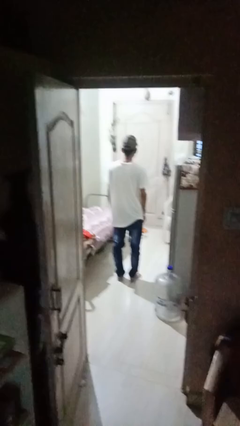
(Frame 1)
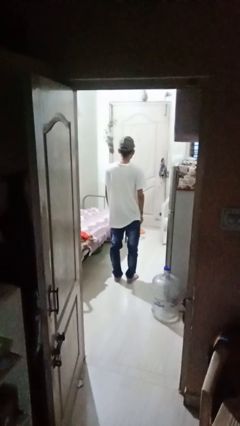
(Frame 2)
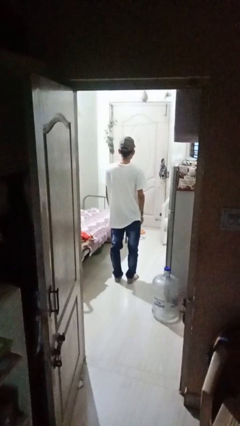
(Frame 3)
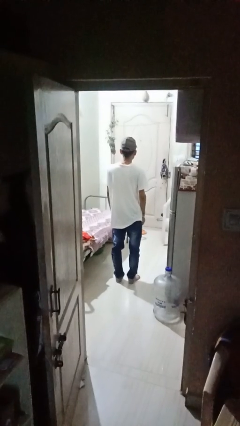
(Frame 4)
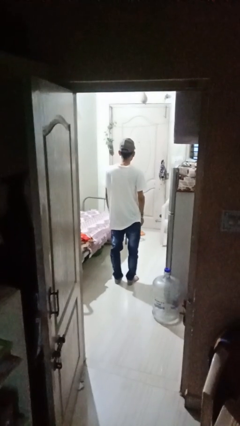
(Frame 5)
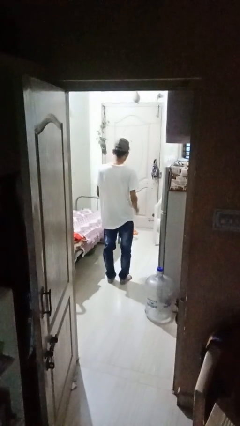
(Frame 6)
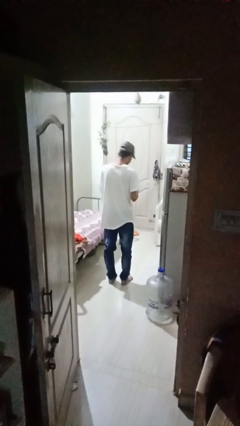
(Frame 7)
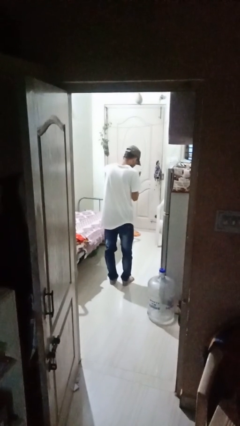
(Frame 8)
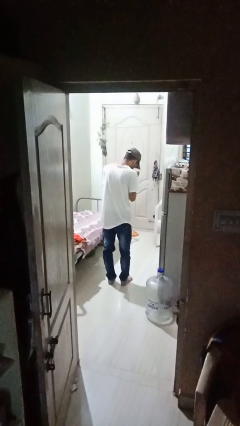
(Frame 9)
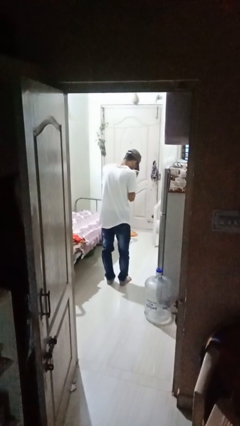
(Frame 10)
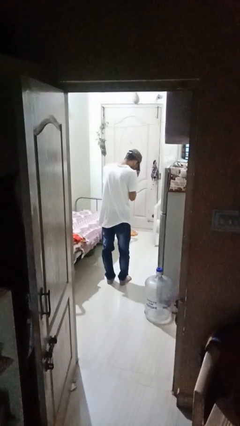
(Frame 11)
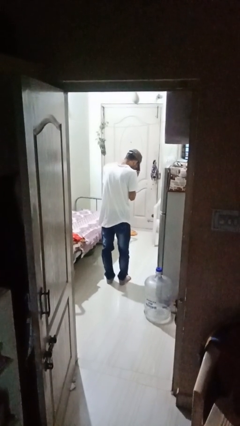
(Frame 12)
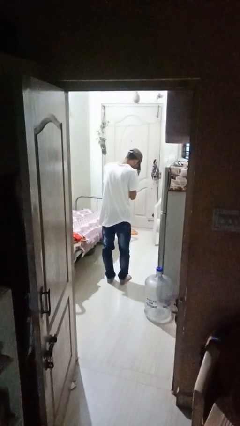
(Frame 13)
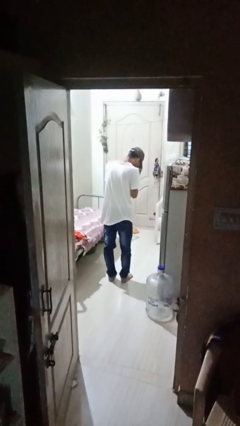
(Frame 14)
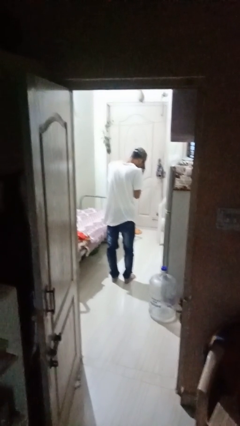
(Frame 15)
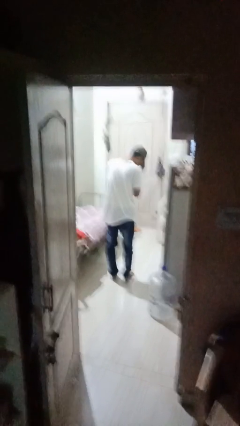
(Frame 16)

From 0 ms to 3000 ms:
person prays

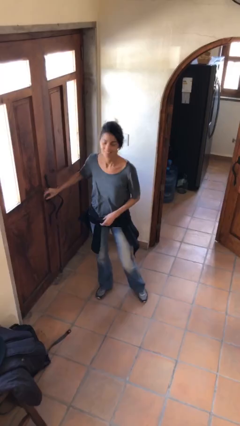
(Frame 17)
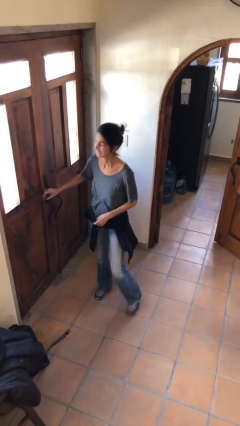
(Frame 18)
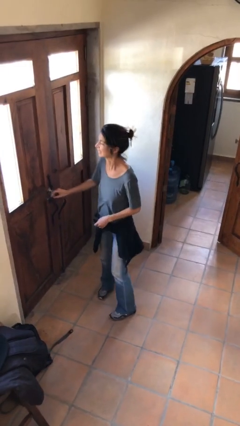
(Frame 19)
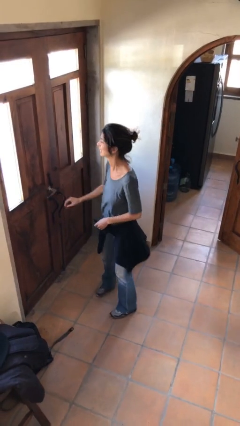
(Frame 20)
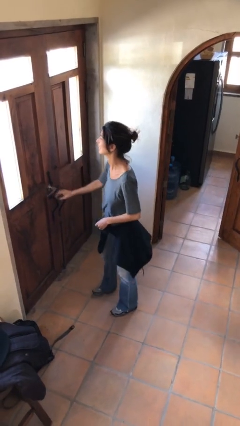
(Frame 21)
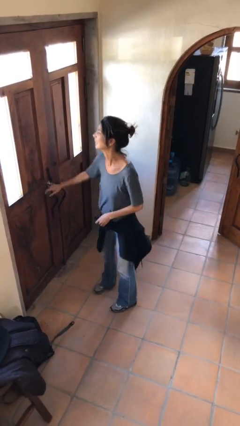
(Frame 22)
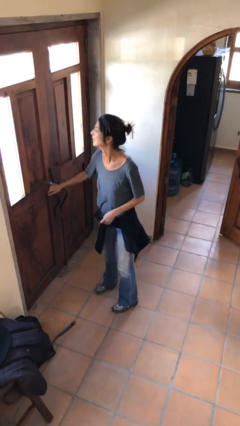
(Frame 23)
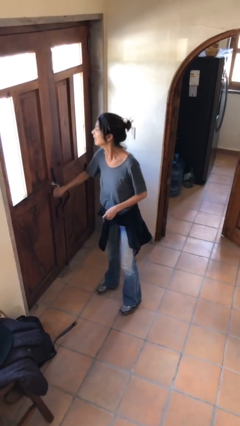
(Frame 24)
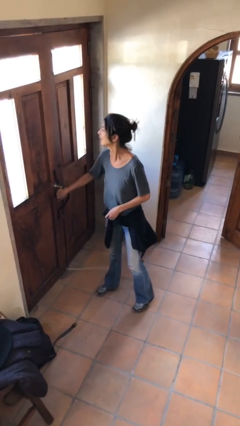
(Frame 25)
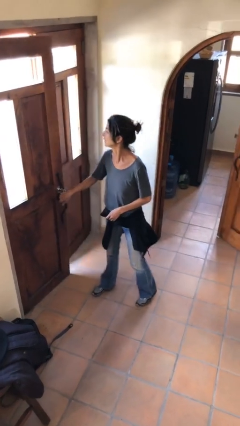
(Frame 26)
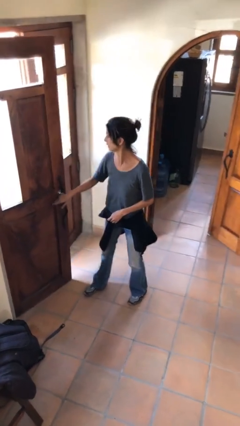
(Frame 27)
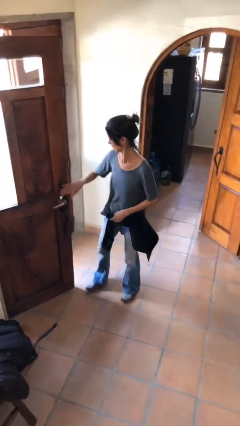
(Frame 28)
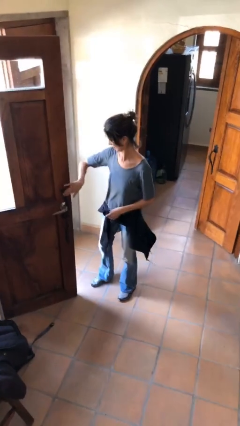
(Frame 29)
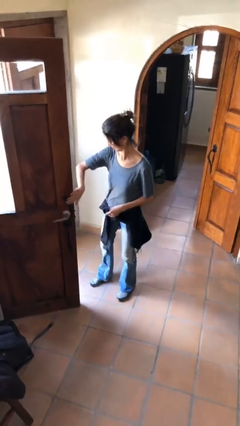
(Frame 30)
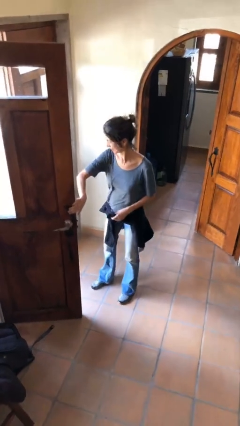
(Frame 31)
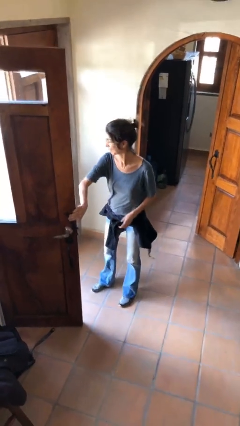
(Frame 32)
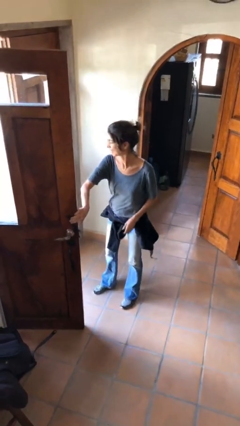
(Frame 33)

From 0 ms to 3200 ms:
person opens facility door

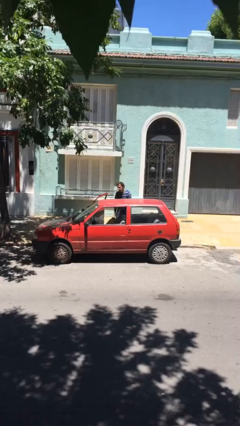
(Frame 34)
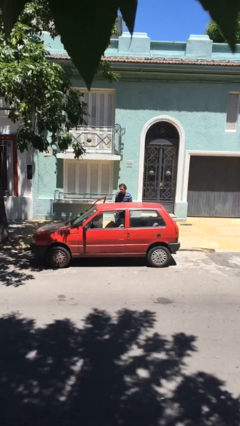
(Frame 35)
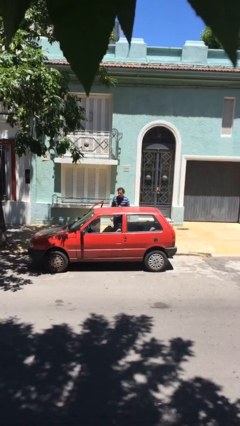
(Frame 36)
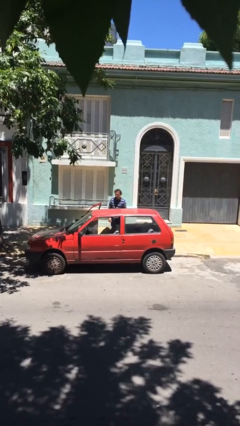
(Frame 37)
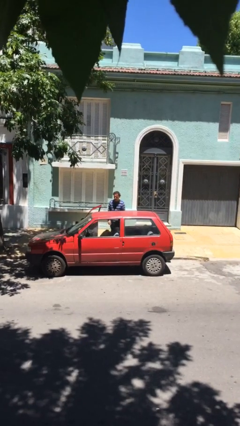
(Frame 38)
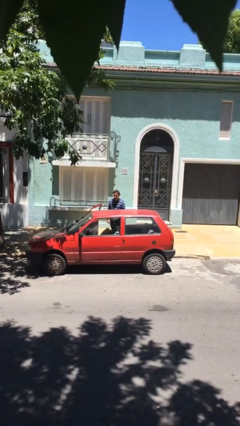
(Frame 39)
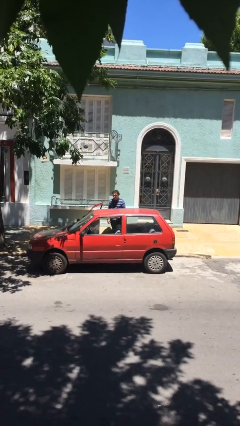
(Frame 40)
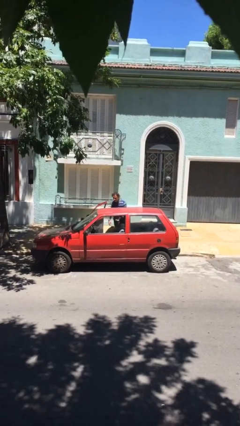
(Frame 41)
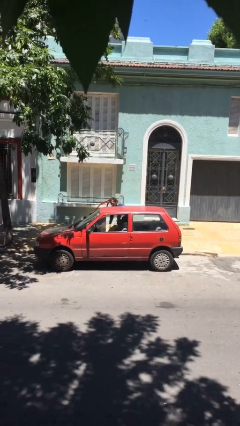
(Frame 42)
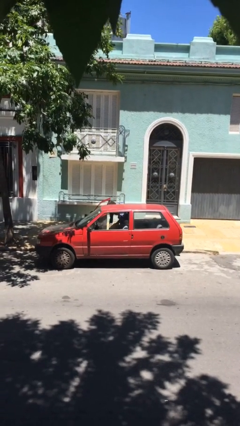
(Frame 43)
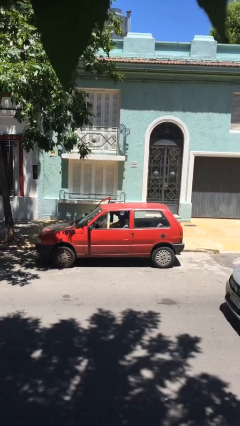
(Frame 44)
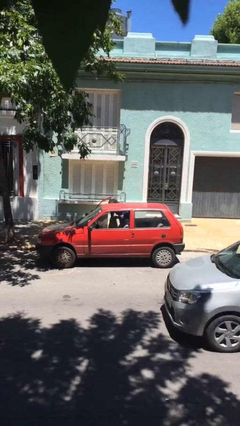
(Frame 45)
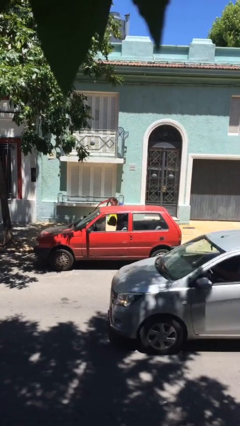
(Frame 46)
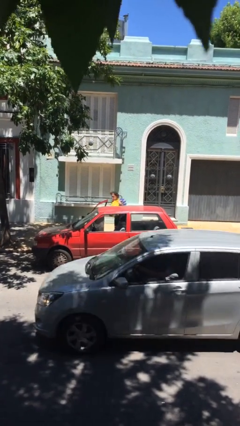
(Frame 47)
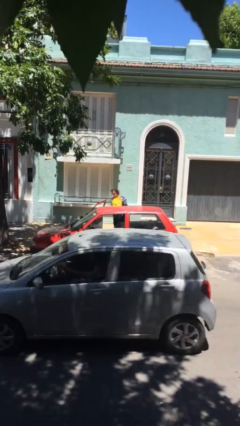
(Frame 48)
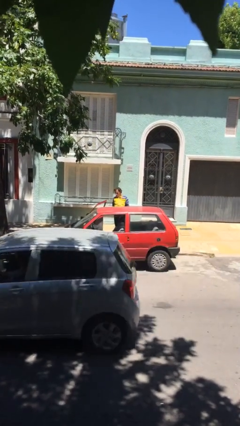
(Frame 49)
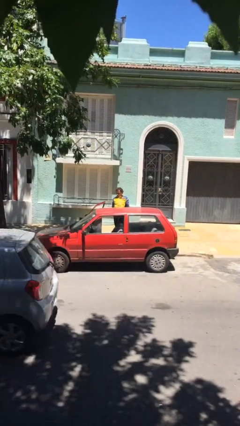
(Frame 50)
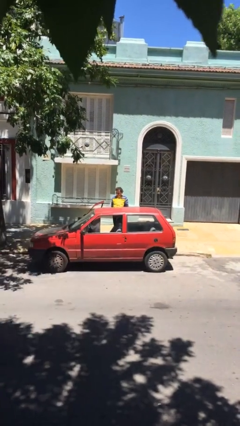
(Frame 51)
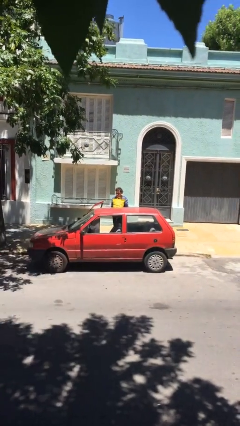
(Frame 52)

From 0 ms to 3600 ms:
person unloads car

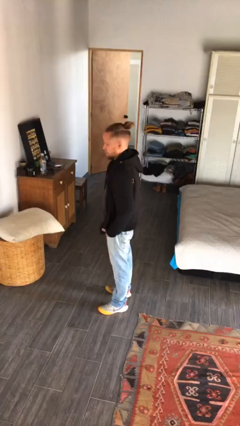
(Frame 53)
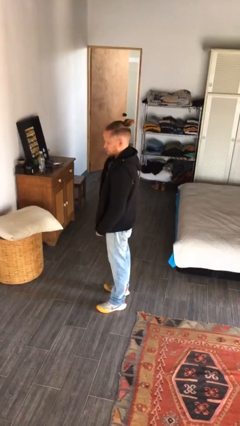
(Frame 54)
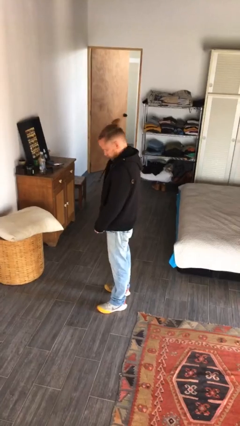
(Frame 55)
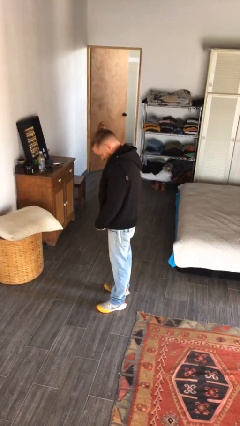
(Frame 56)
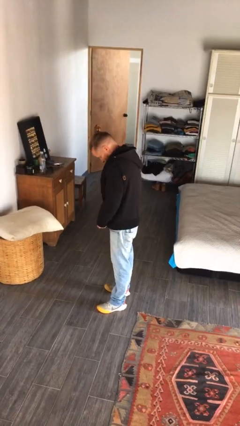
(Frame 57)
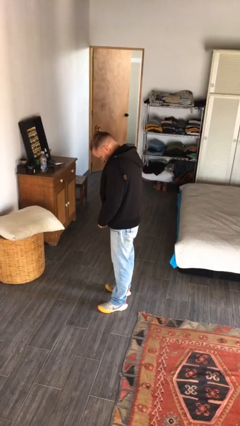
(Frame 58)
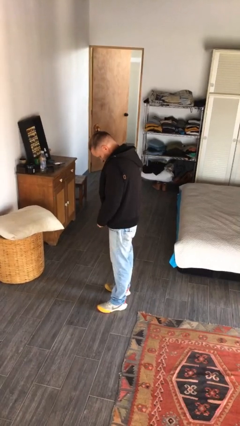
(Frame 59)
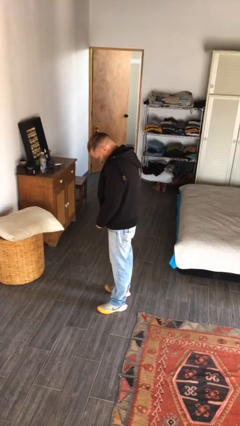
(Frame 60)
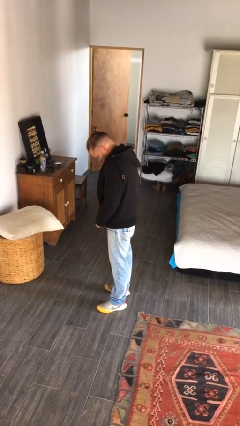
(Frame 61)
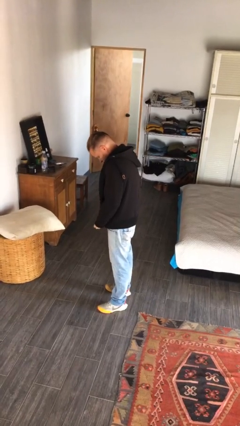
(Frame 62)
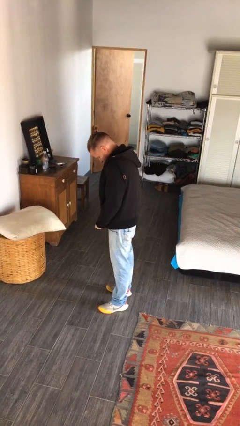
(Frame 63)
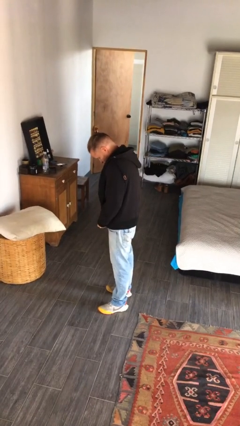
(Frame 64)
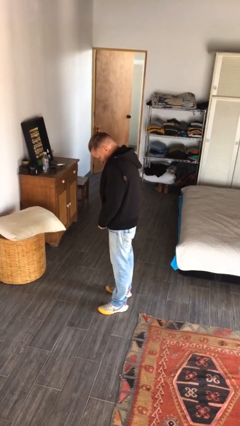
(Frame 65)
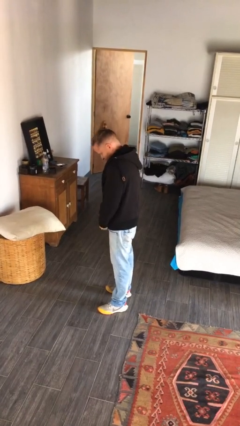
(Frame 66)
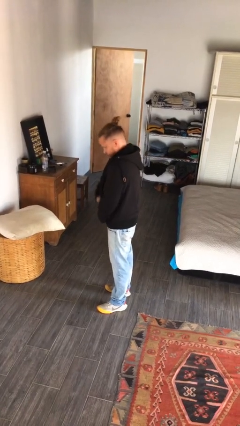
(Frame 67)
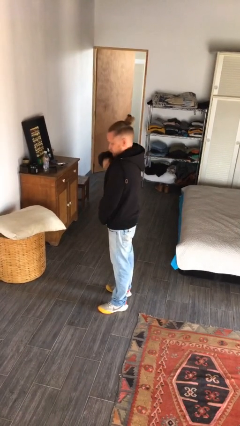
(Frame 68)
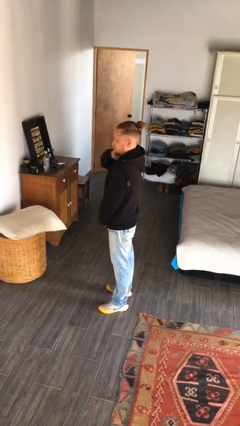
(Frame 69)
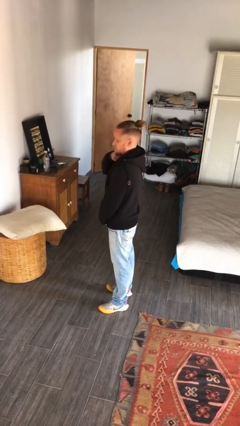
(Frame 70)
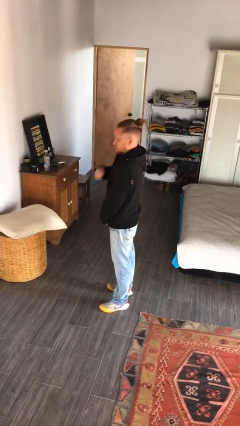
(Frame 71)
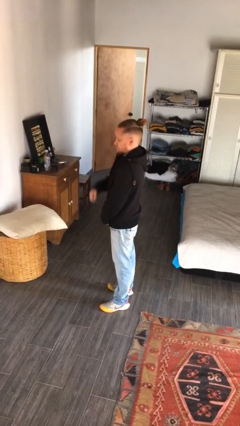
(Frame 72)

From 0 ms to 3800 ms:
person zips up jacket

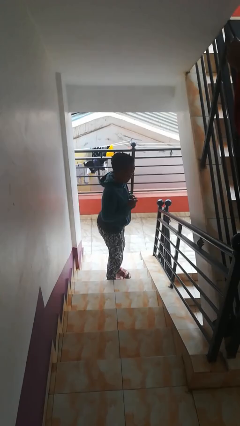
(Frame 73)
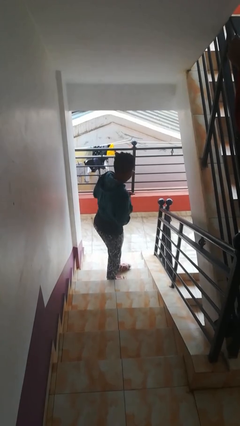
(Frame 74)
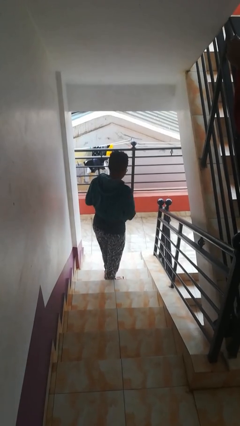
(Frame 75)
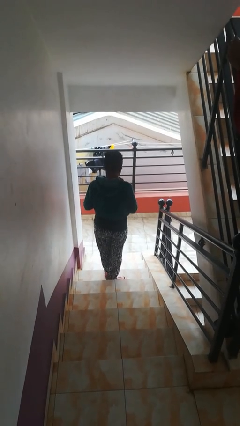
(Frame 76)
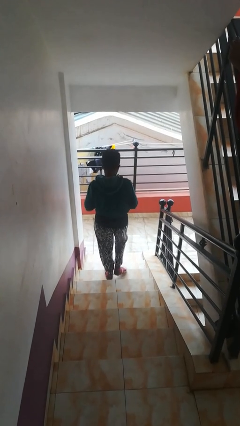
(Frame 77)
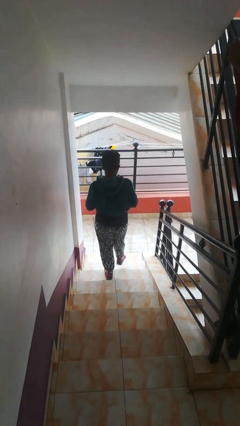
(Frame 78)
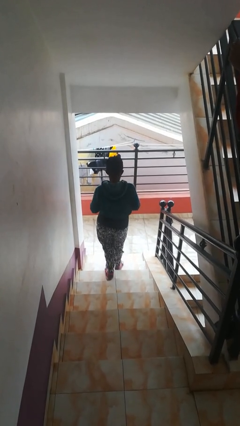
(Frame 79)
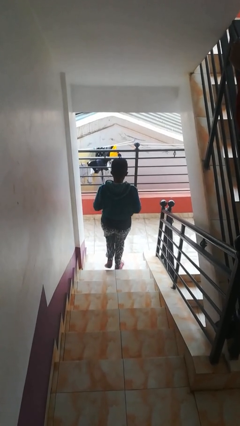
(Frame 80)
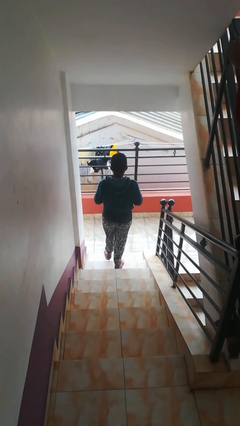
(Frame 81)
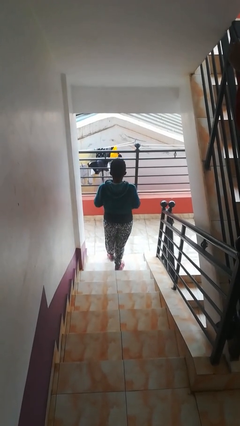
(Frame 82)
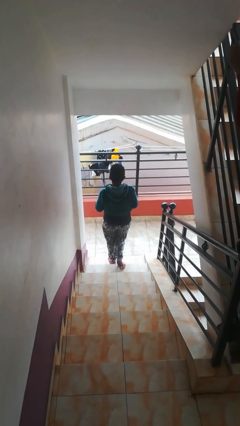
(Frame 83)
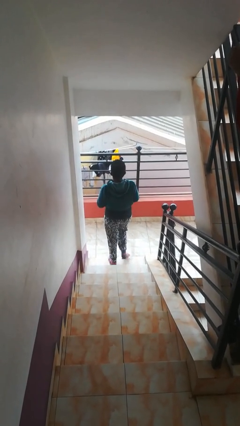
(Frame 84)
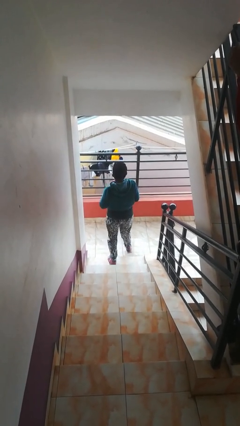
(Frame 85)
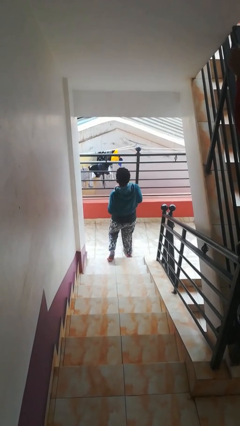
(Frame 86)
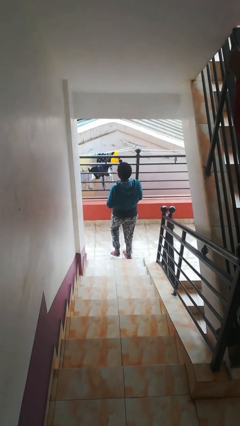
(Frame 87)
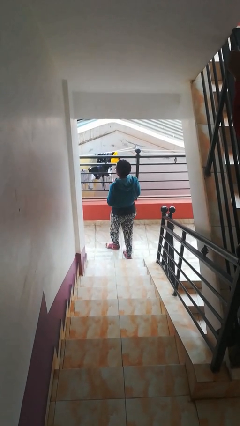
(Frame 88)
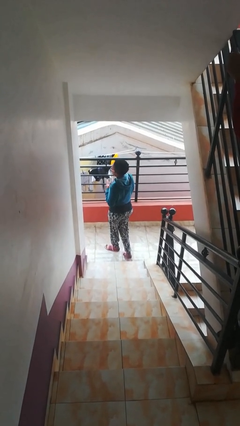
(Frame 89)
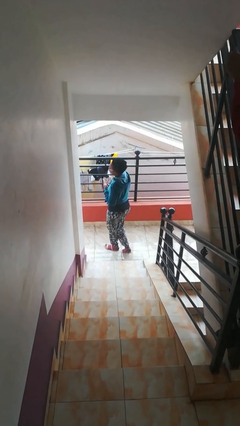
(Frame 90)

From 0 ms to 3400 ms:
person climbs down stairs

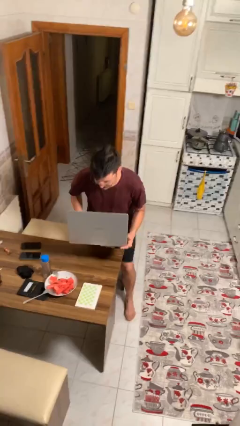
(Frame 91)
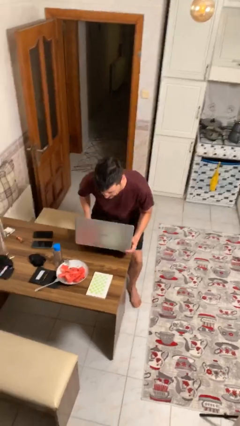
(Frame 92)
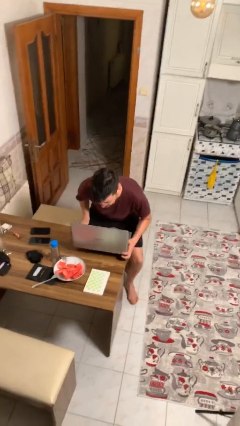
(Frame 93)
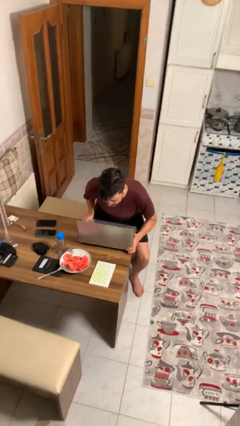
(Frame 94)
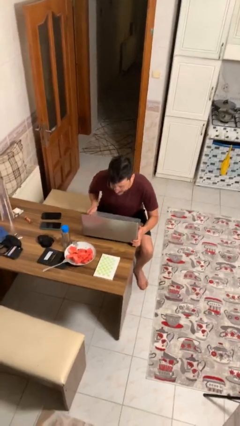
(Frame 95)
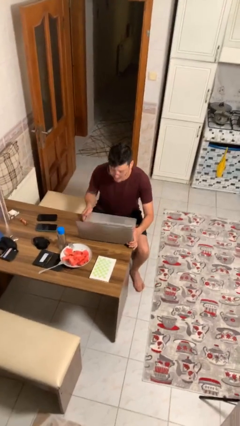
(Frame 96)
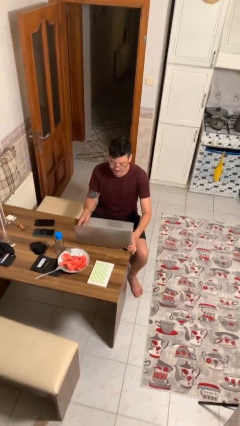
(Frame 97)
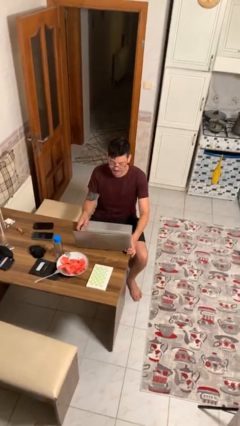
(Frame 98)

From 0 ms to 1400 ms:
person sits down
